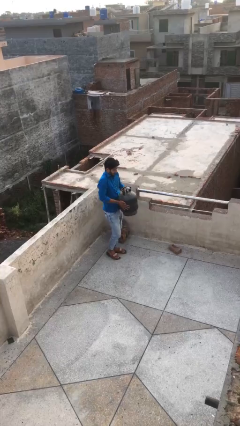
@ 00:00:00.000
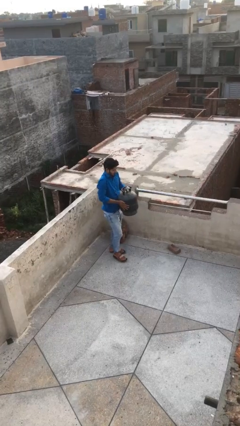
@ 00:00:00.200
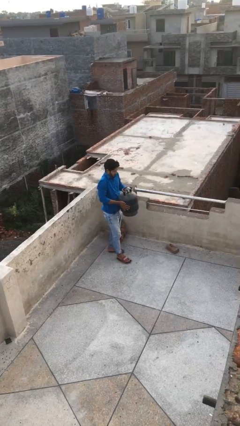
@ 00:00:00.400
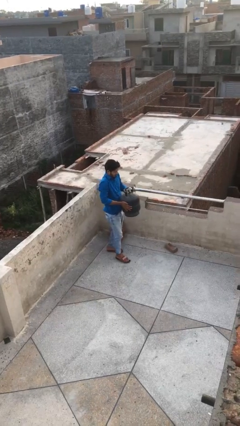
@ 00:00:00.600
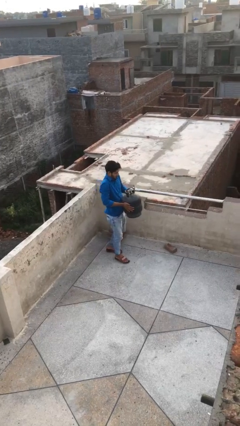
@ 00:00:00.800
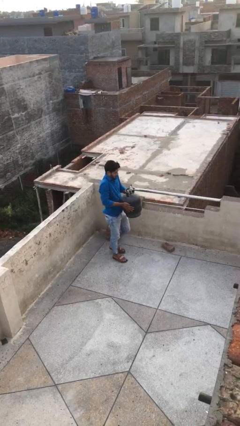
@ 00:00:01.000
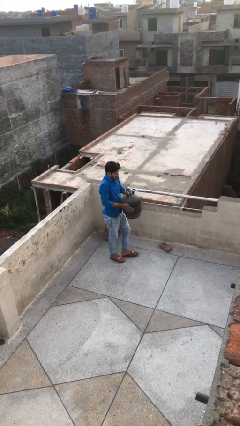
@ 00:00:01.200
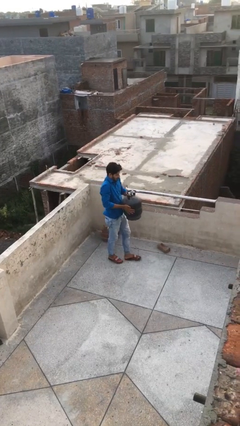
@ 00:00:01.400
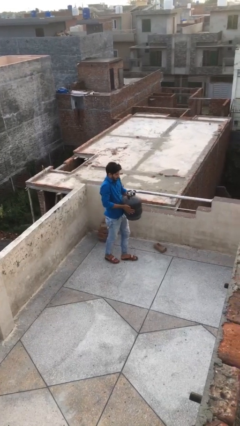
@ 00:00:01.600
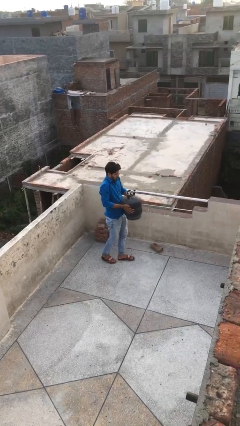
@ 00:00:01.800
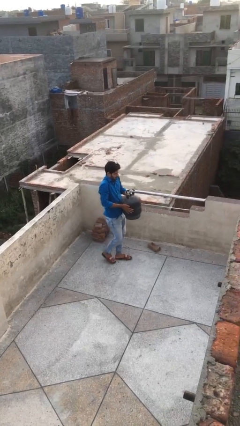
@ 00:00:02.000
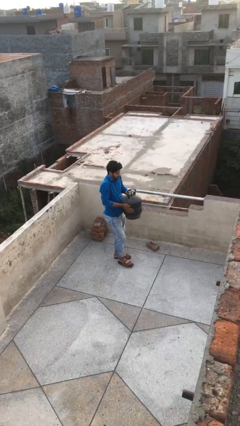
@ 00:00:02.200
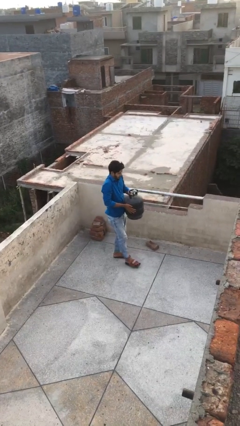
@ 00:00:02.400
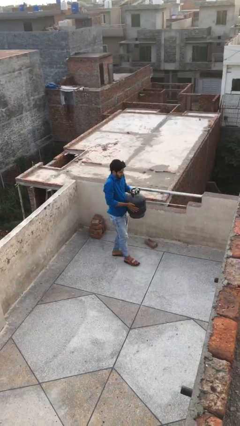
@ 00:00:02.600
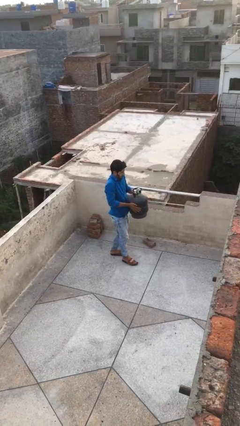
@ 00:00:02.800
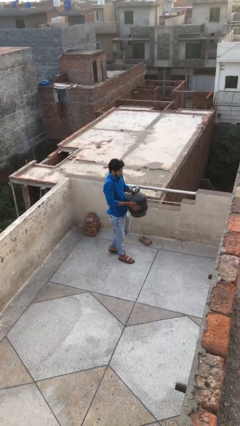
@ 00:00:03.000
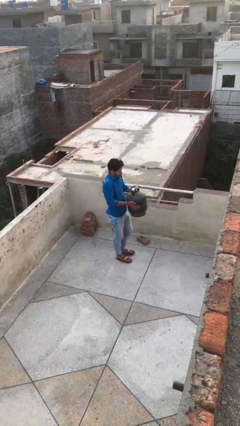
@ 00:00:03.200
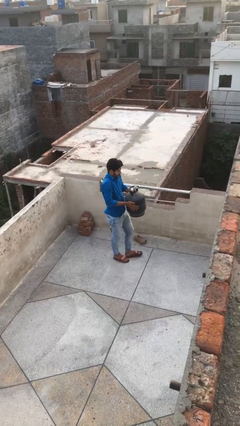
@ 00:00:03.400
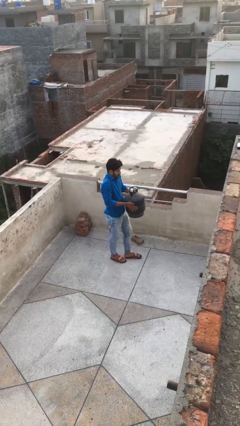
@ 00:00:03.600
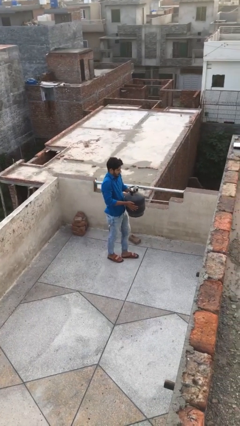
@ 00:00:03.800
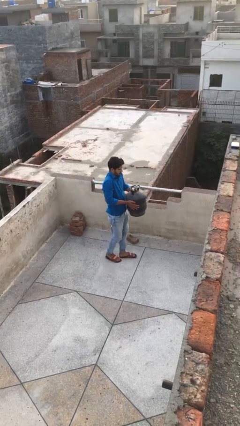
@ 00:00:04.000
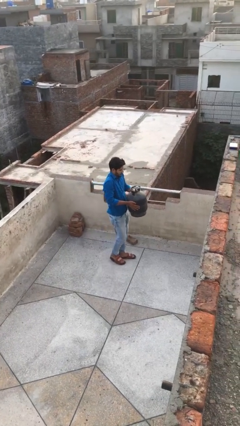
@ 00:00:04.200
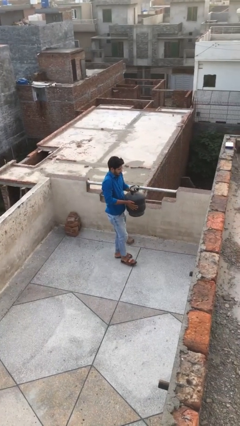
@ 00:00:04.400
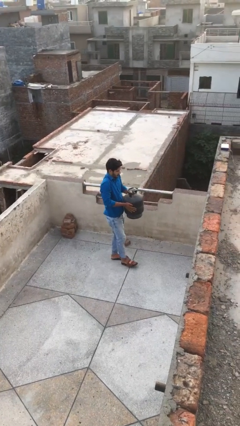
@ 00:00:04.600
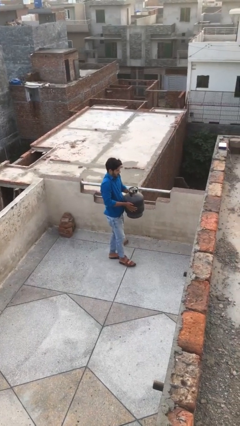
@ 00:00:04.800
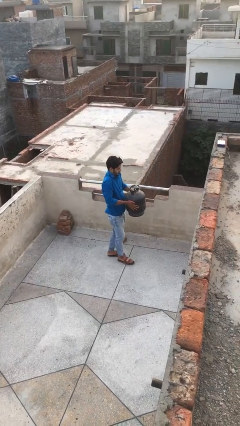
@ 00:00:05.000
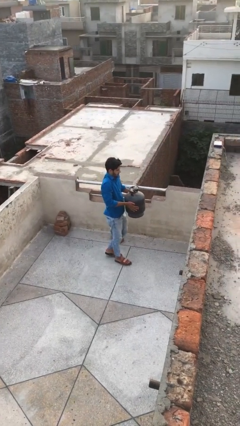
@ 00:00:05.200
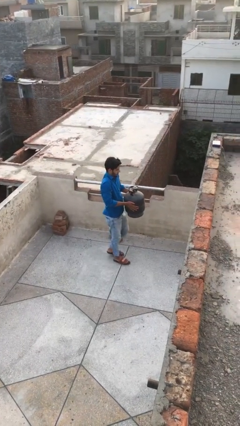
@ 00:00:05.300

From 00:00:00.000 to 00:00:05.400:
person carries heavy object

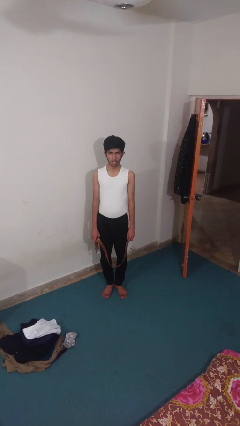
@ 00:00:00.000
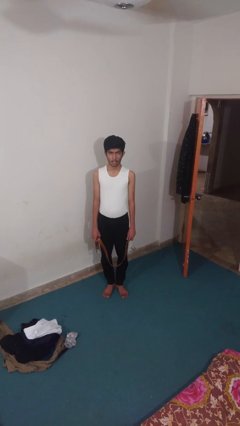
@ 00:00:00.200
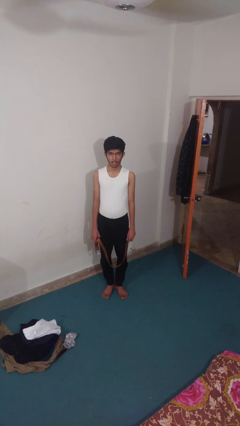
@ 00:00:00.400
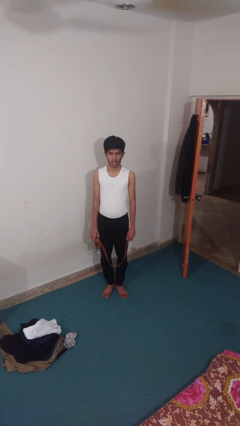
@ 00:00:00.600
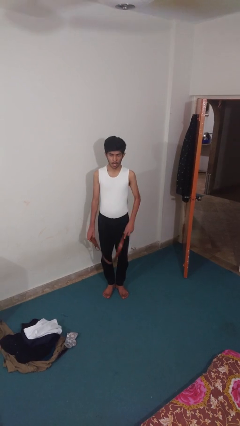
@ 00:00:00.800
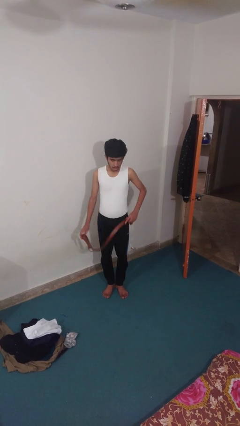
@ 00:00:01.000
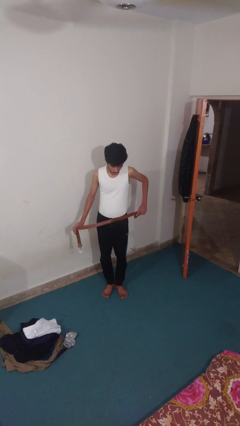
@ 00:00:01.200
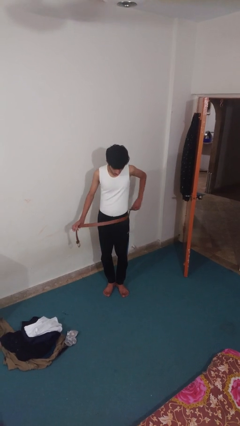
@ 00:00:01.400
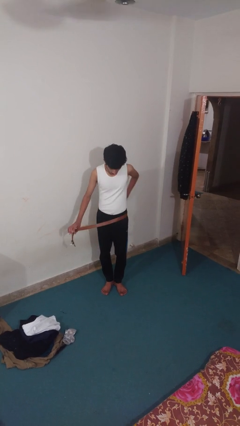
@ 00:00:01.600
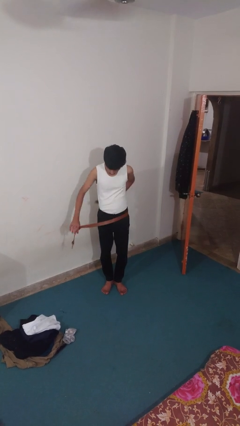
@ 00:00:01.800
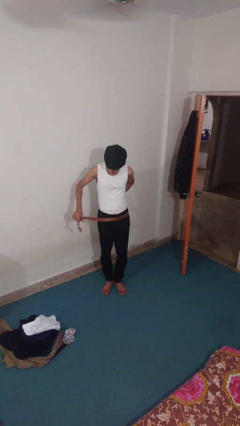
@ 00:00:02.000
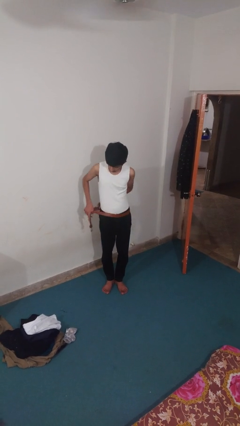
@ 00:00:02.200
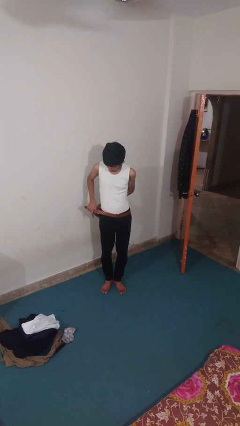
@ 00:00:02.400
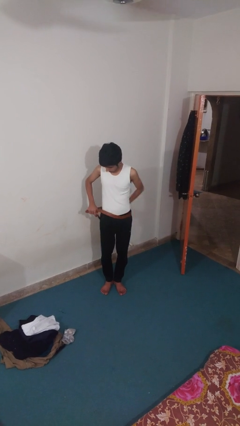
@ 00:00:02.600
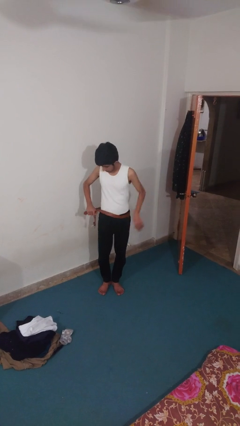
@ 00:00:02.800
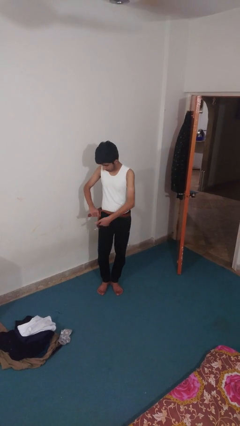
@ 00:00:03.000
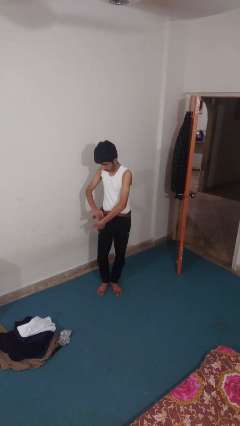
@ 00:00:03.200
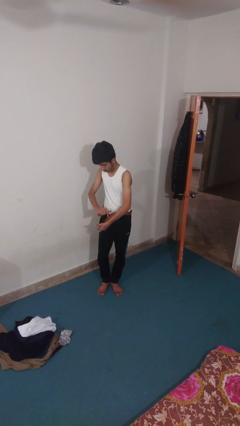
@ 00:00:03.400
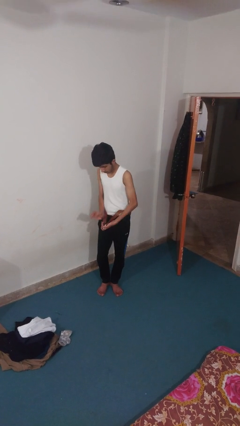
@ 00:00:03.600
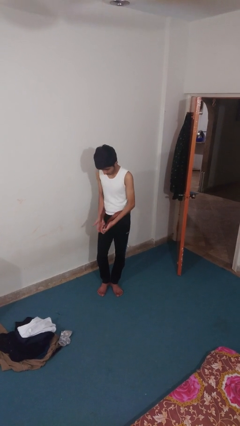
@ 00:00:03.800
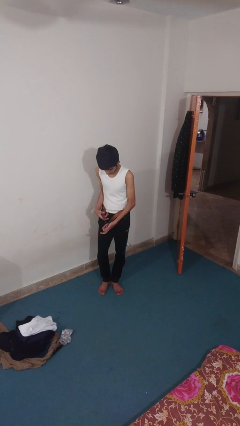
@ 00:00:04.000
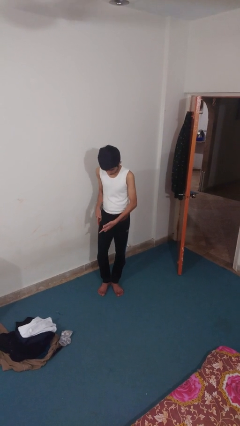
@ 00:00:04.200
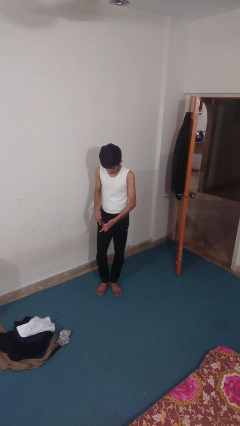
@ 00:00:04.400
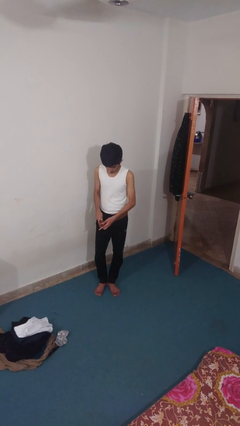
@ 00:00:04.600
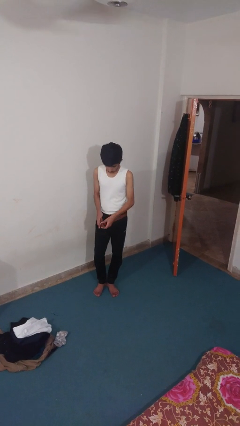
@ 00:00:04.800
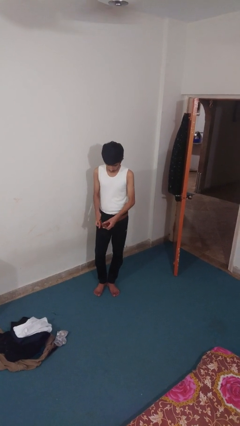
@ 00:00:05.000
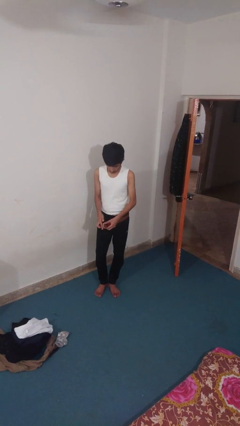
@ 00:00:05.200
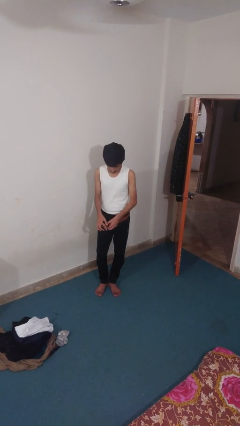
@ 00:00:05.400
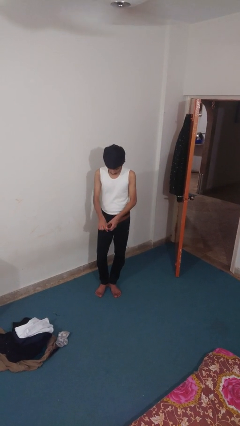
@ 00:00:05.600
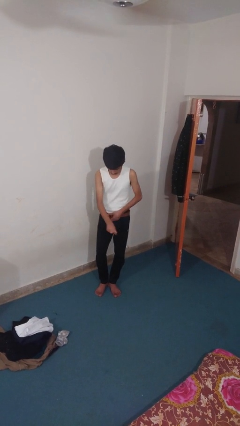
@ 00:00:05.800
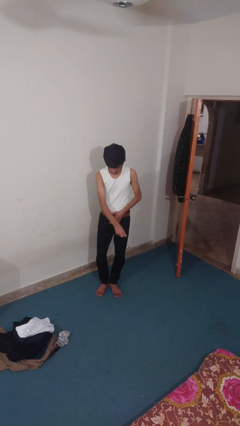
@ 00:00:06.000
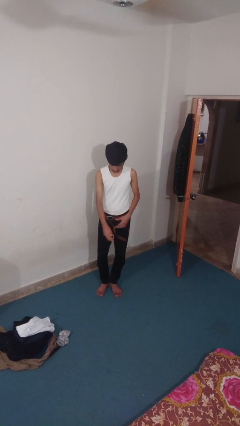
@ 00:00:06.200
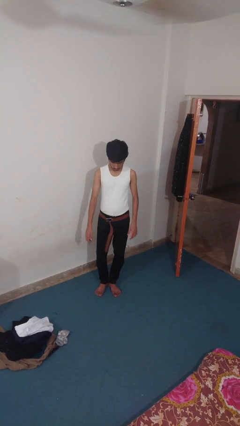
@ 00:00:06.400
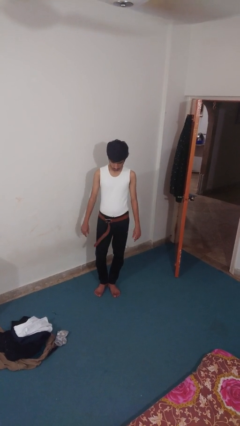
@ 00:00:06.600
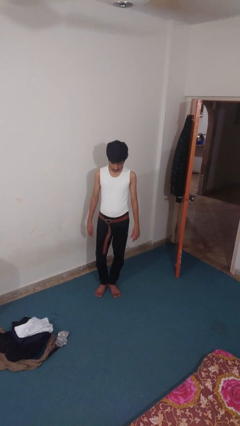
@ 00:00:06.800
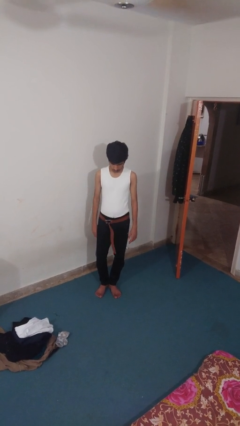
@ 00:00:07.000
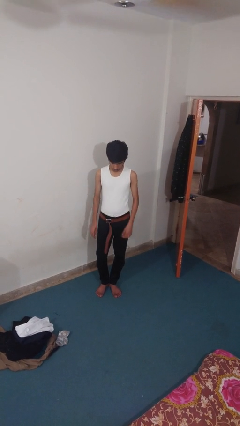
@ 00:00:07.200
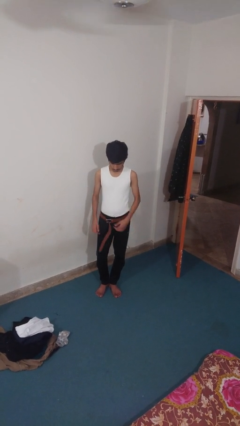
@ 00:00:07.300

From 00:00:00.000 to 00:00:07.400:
person puts on belt

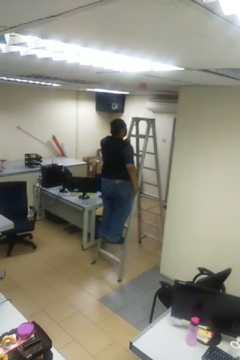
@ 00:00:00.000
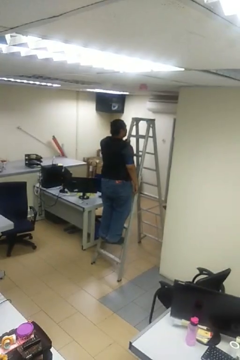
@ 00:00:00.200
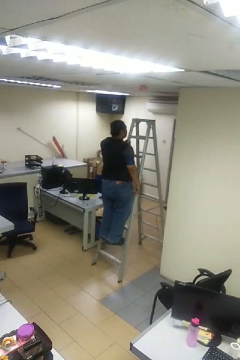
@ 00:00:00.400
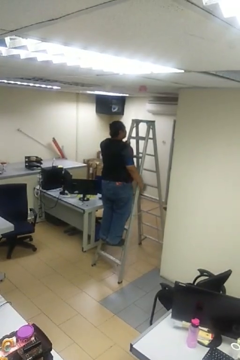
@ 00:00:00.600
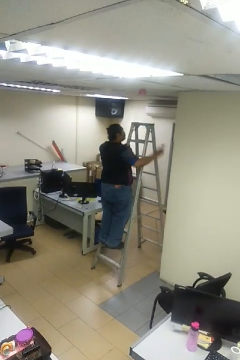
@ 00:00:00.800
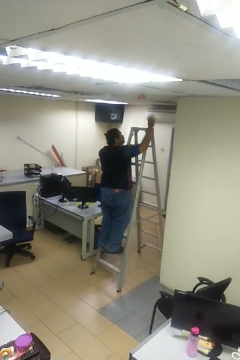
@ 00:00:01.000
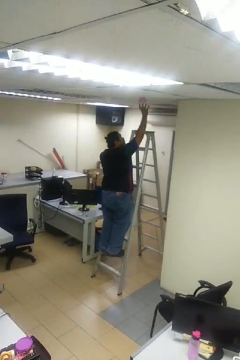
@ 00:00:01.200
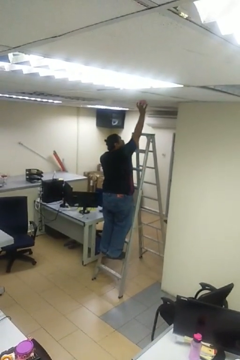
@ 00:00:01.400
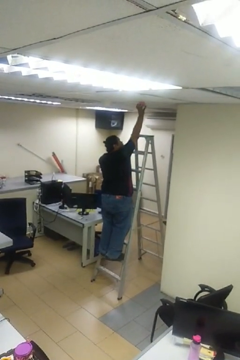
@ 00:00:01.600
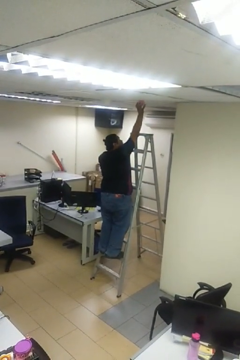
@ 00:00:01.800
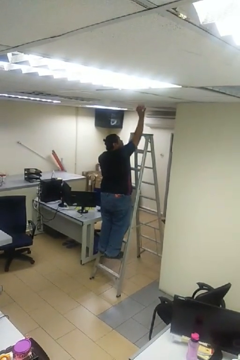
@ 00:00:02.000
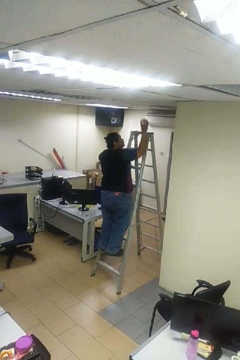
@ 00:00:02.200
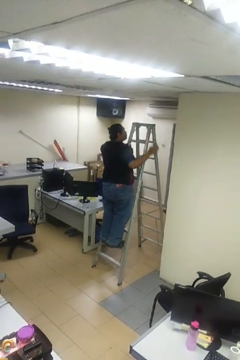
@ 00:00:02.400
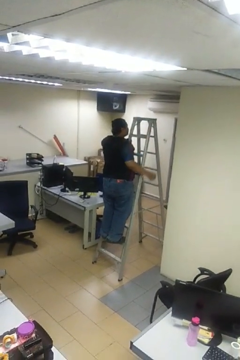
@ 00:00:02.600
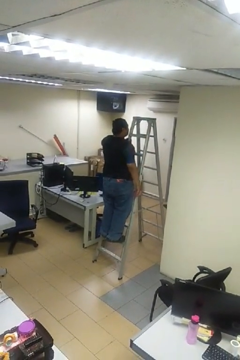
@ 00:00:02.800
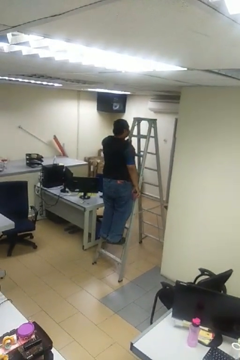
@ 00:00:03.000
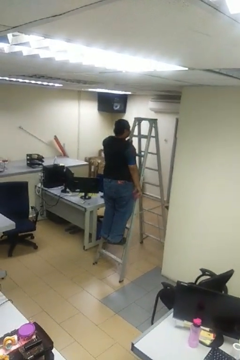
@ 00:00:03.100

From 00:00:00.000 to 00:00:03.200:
person takes down smoke detector

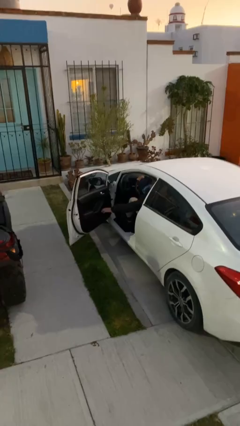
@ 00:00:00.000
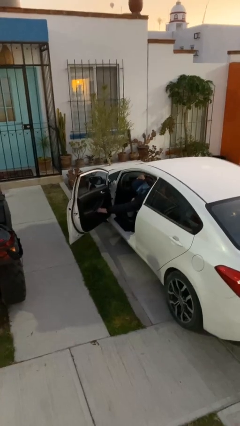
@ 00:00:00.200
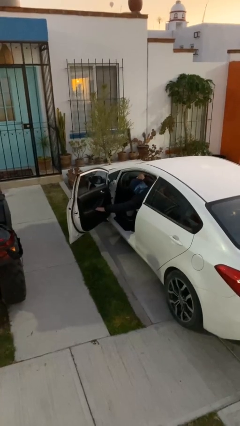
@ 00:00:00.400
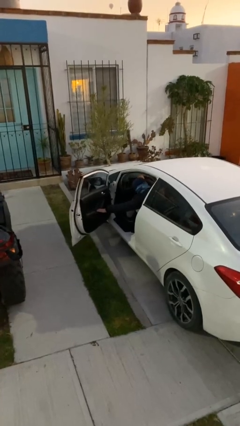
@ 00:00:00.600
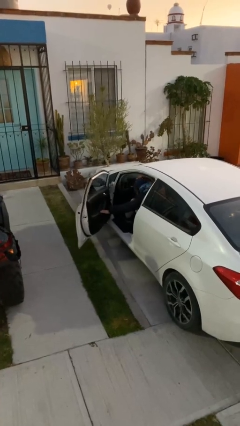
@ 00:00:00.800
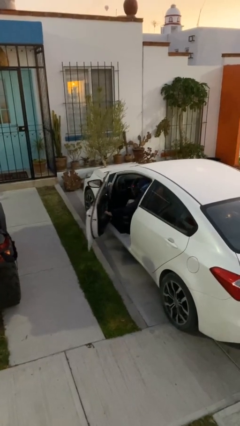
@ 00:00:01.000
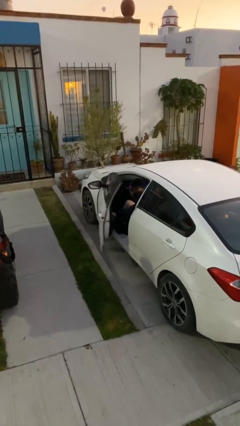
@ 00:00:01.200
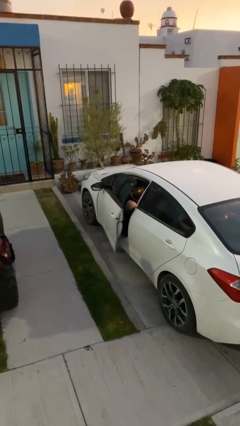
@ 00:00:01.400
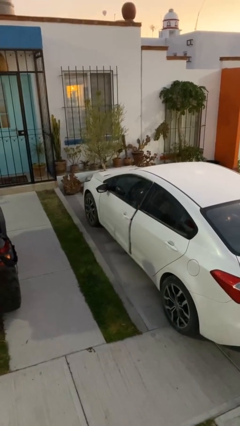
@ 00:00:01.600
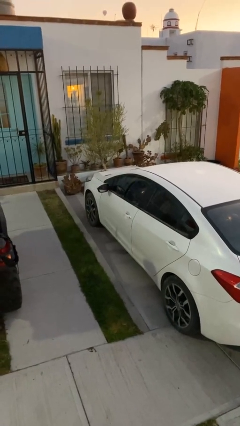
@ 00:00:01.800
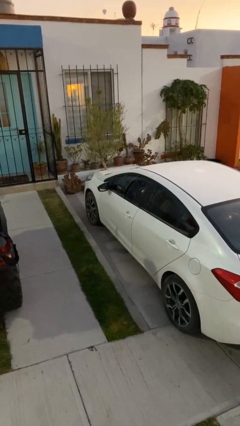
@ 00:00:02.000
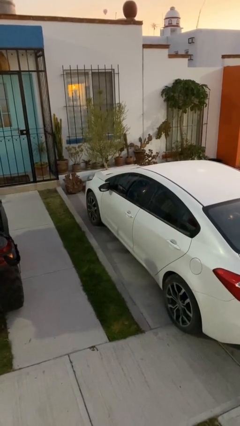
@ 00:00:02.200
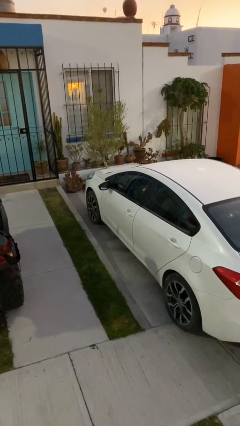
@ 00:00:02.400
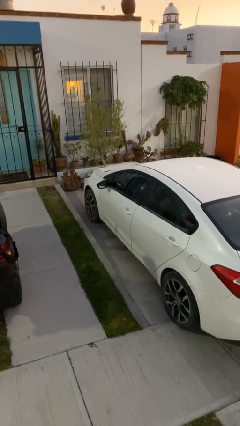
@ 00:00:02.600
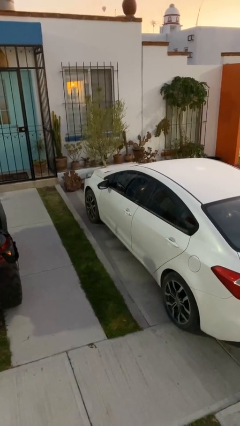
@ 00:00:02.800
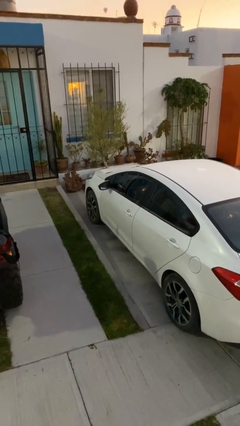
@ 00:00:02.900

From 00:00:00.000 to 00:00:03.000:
person closes car door
